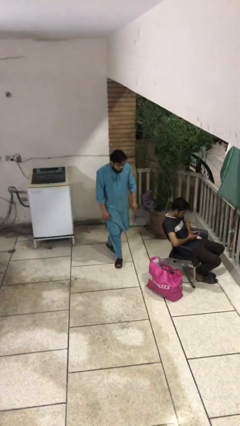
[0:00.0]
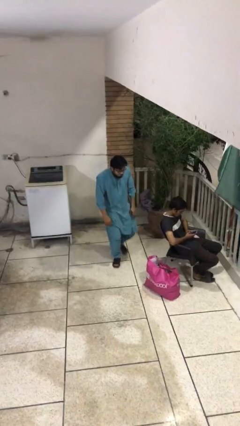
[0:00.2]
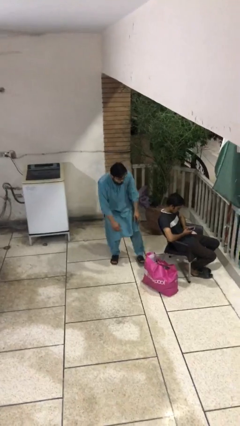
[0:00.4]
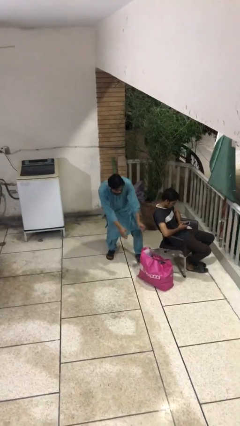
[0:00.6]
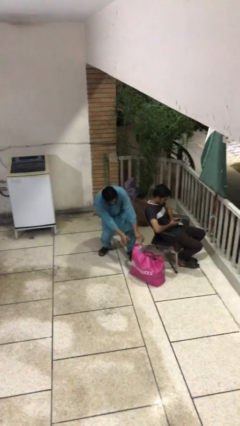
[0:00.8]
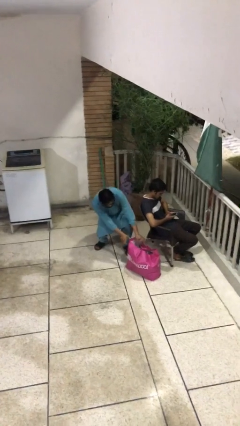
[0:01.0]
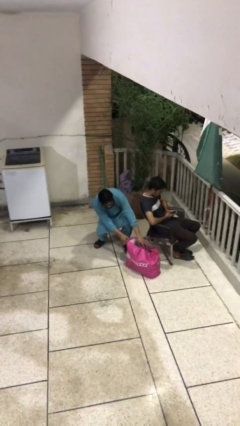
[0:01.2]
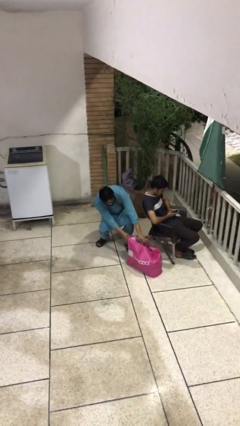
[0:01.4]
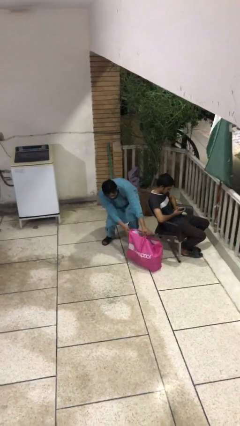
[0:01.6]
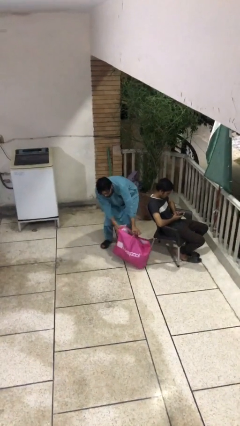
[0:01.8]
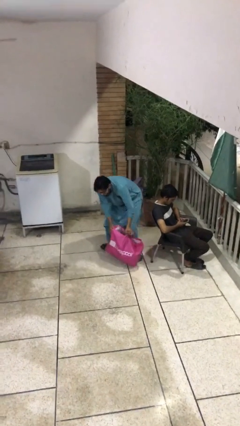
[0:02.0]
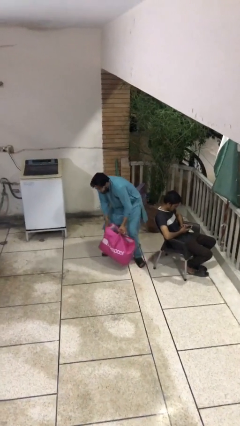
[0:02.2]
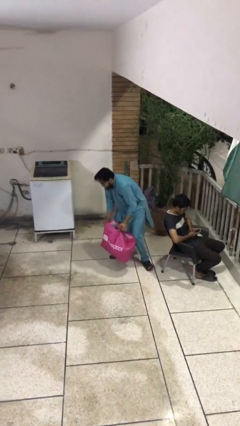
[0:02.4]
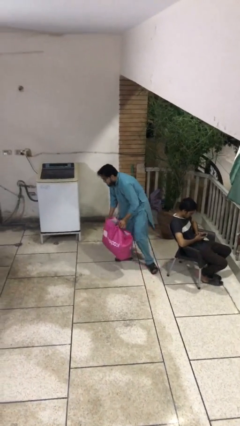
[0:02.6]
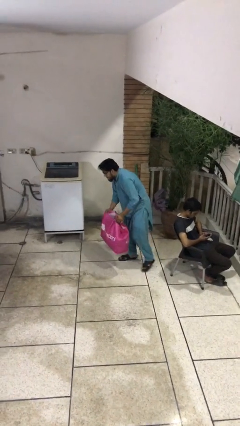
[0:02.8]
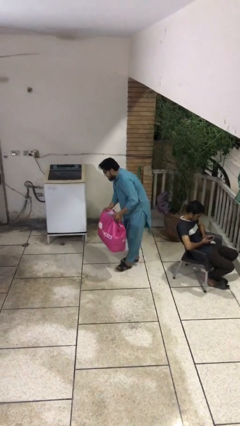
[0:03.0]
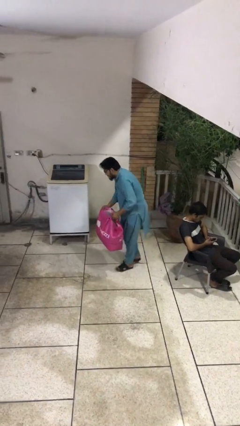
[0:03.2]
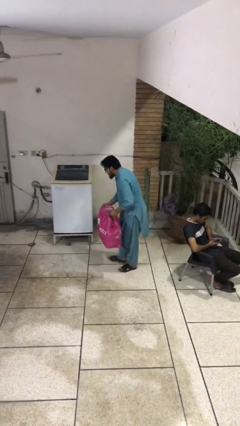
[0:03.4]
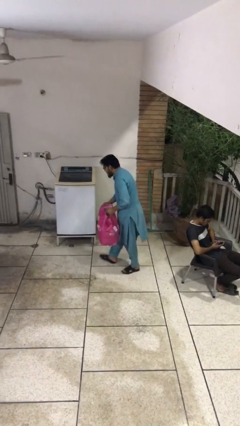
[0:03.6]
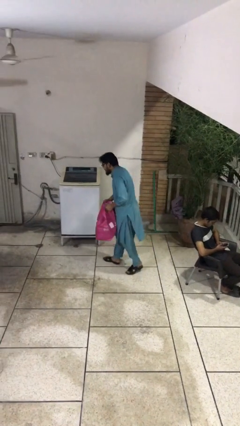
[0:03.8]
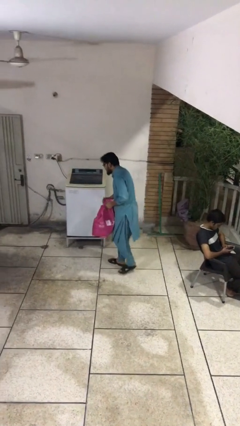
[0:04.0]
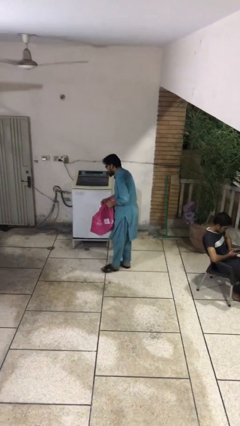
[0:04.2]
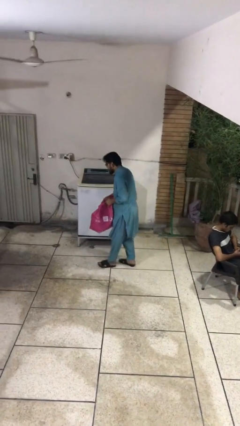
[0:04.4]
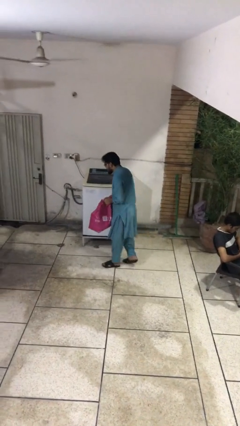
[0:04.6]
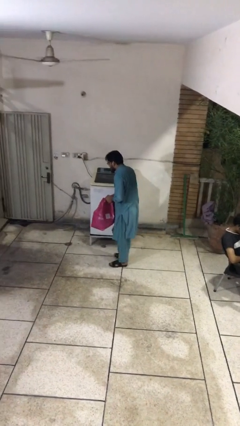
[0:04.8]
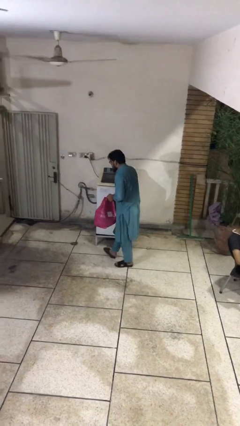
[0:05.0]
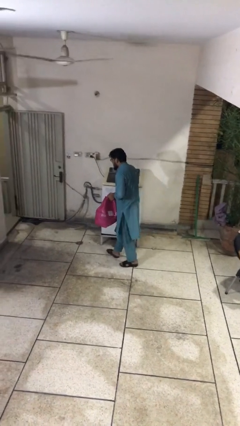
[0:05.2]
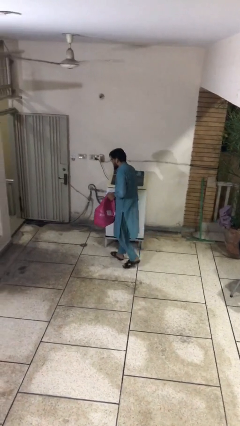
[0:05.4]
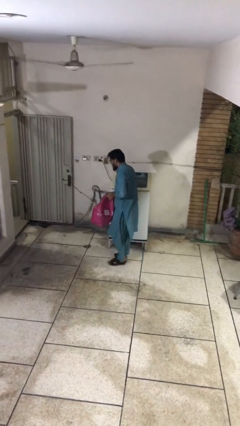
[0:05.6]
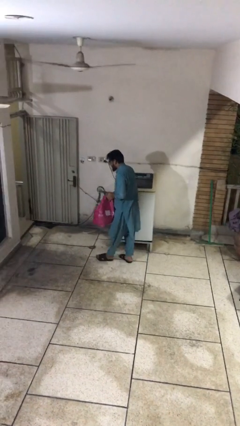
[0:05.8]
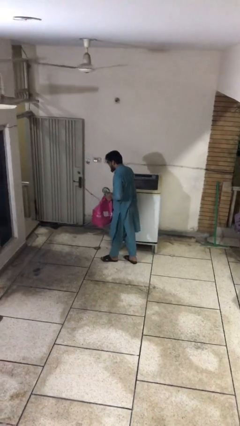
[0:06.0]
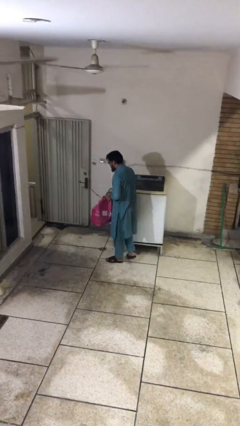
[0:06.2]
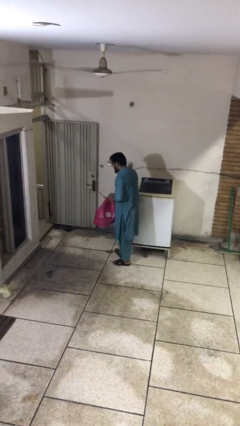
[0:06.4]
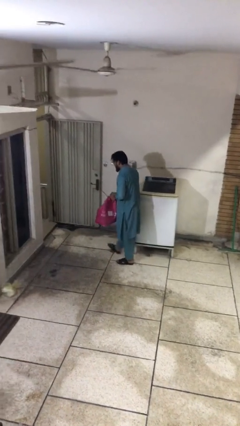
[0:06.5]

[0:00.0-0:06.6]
person steals object from person

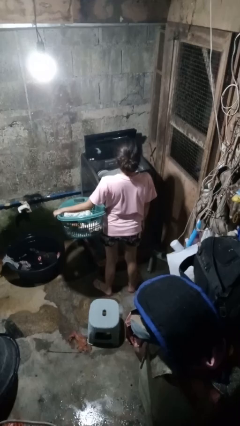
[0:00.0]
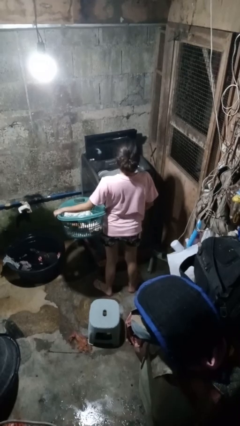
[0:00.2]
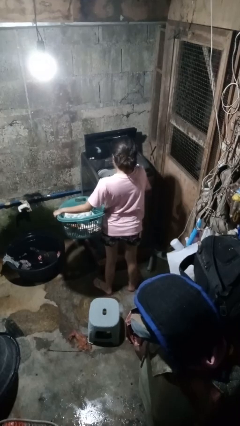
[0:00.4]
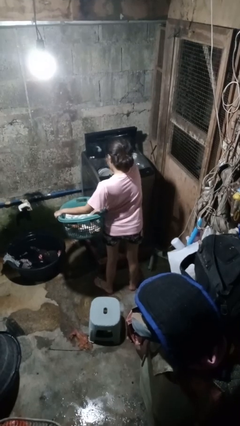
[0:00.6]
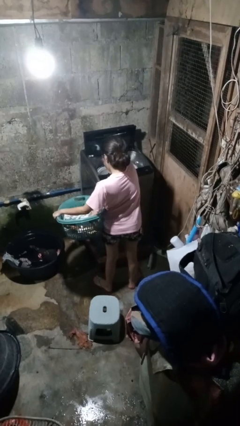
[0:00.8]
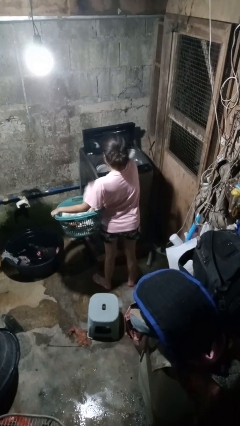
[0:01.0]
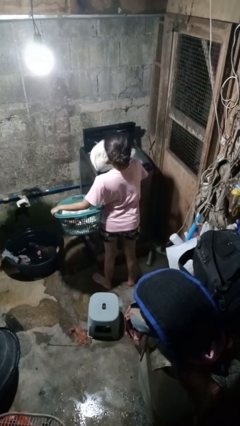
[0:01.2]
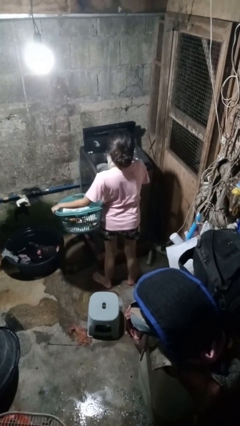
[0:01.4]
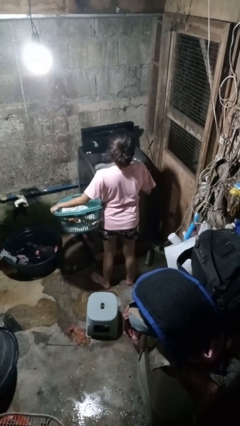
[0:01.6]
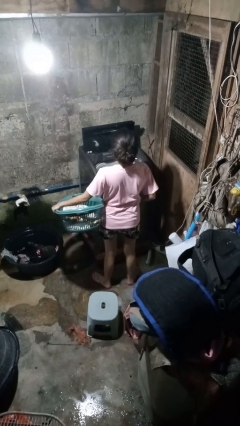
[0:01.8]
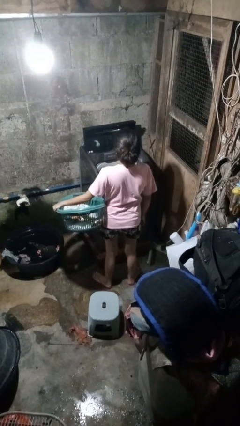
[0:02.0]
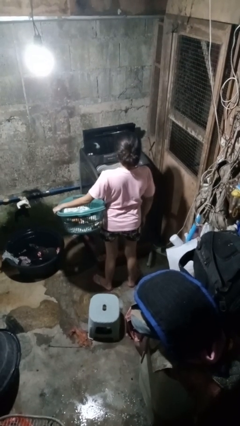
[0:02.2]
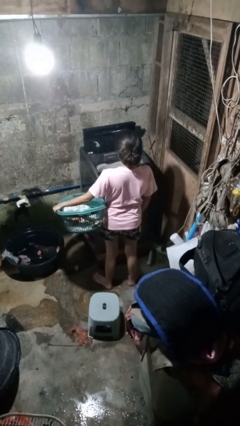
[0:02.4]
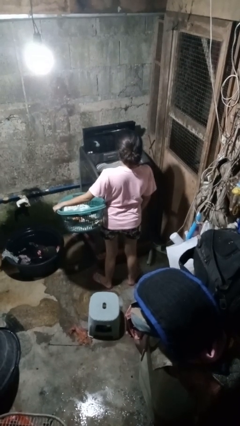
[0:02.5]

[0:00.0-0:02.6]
person loads dryer

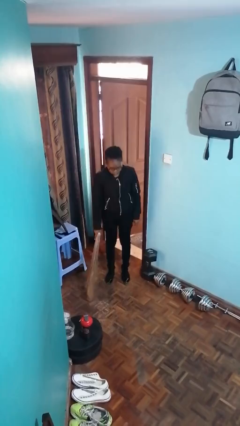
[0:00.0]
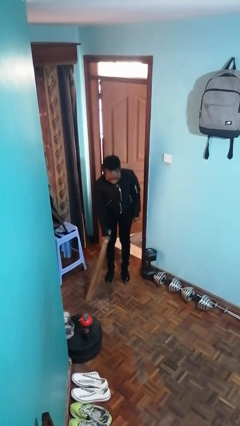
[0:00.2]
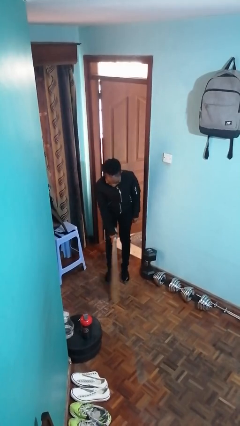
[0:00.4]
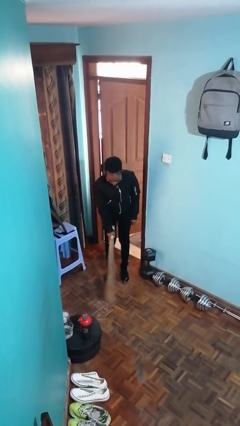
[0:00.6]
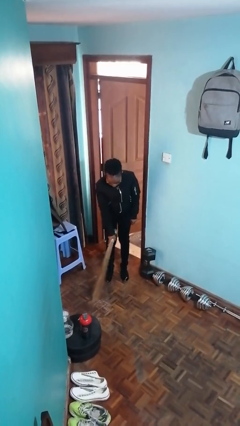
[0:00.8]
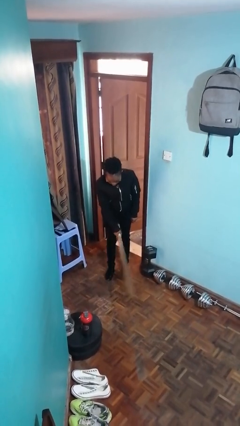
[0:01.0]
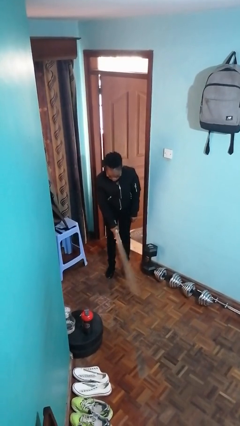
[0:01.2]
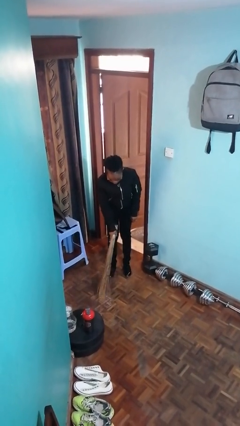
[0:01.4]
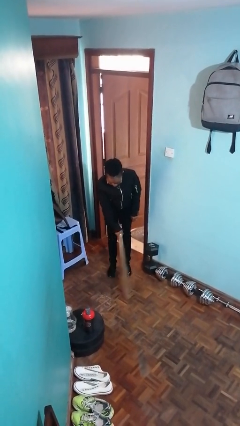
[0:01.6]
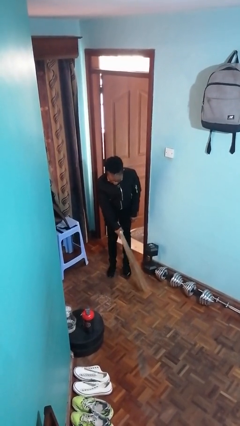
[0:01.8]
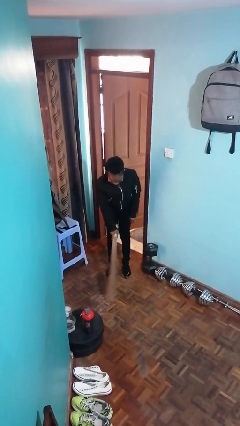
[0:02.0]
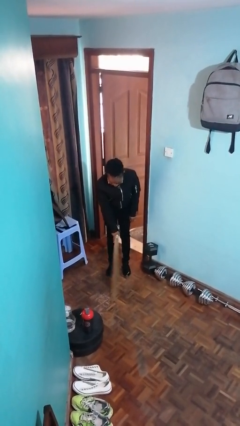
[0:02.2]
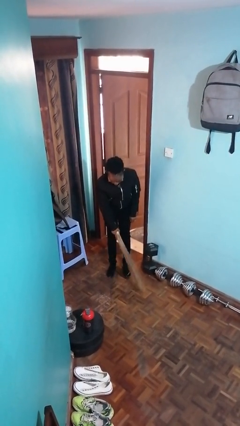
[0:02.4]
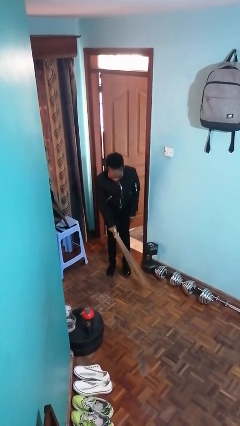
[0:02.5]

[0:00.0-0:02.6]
person sweeps floor

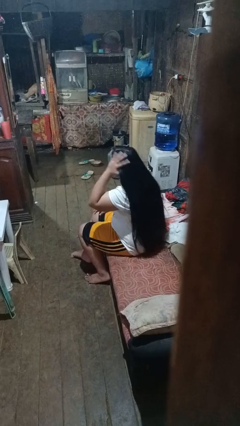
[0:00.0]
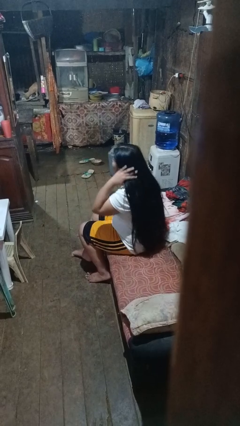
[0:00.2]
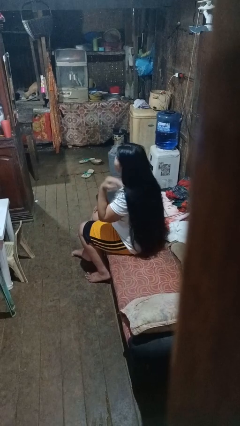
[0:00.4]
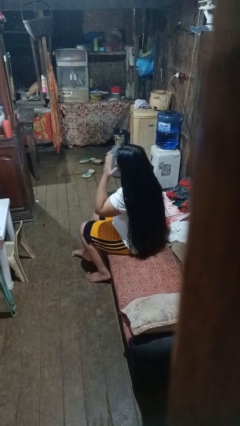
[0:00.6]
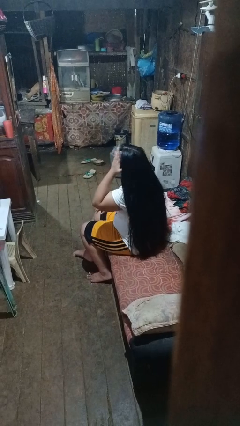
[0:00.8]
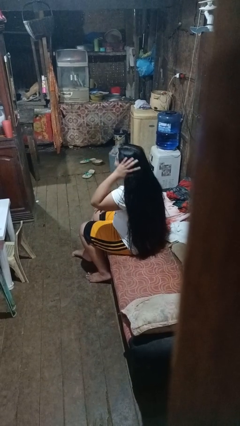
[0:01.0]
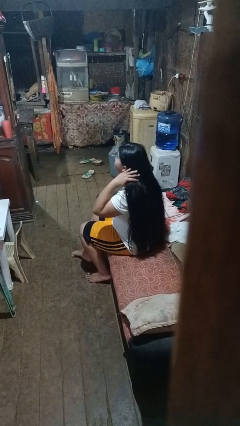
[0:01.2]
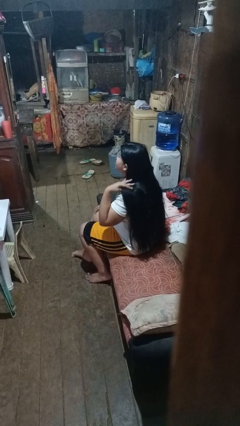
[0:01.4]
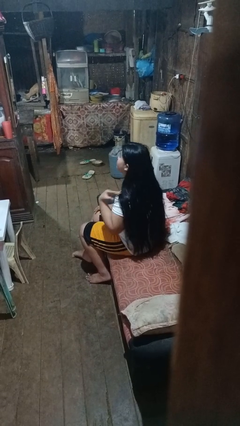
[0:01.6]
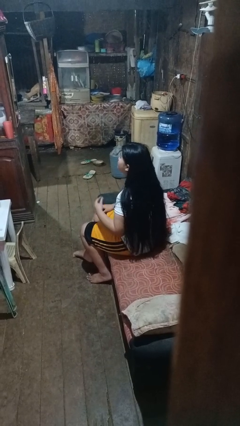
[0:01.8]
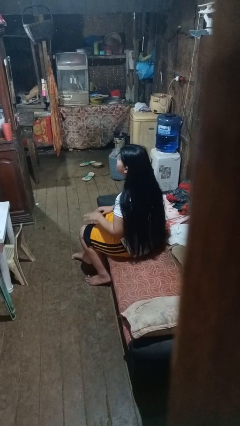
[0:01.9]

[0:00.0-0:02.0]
person strokes hair

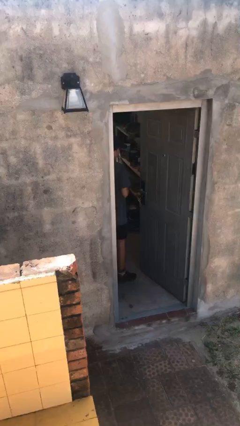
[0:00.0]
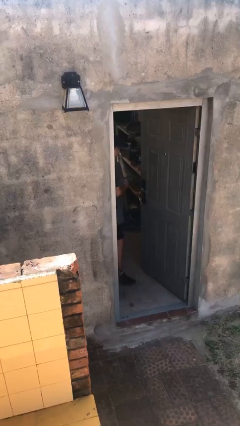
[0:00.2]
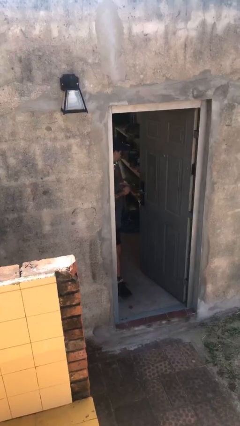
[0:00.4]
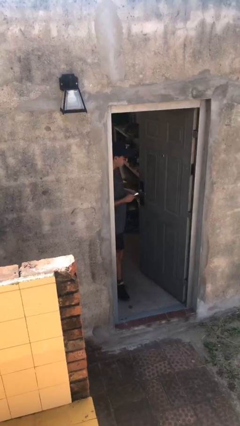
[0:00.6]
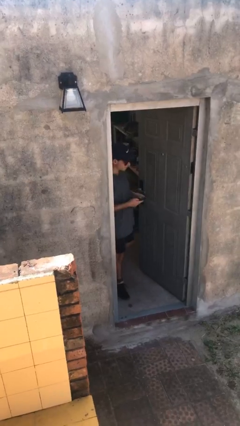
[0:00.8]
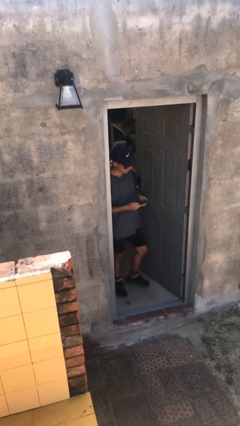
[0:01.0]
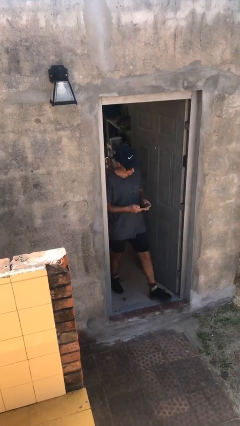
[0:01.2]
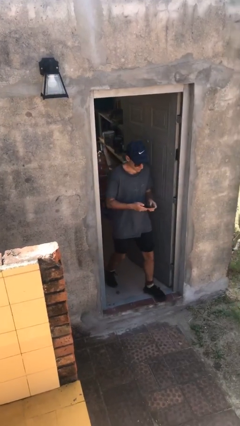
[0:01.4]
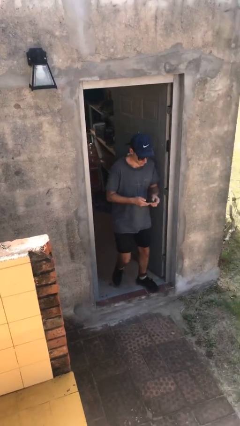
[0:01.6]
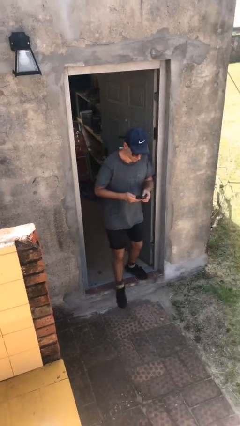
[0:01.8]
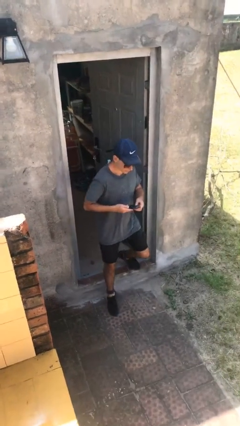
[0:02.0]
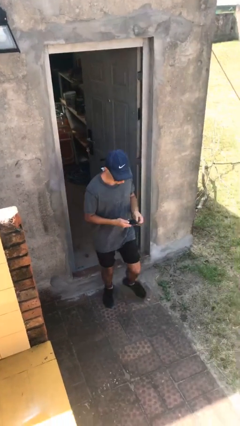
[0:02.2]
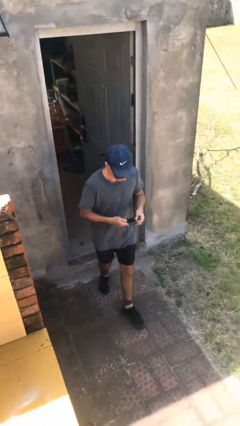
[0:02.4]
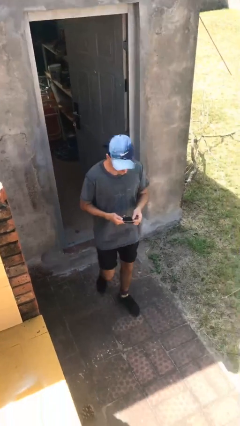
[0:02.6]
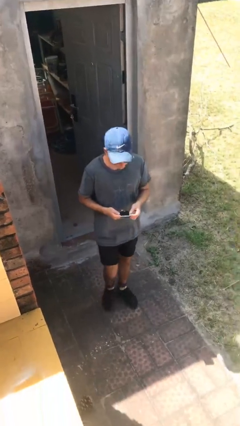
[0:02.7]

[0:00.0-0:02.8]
person enters scene through structure

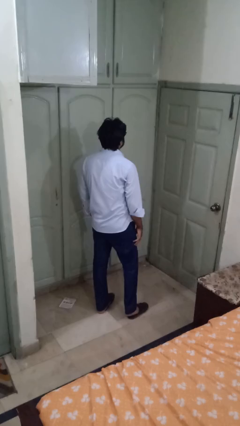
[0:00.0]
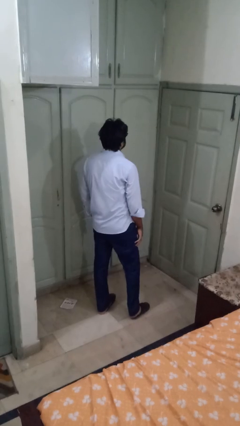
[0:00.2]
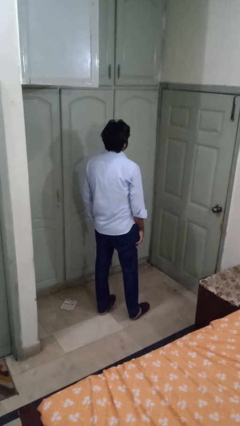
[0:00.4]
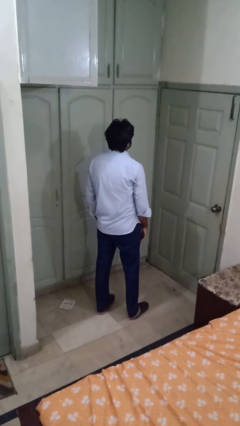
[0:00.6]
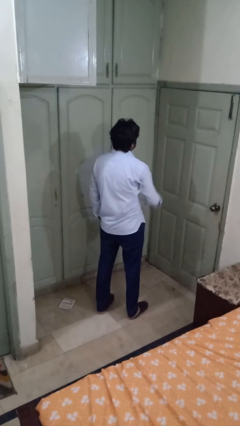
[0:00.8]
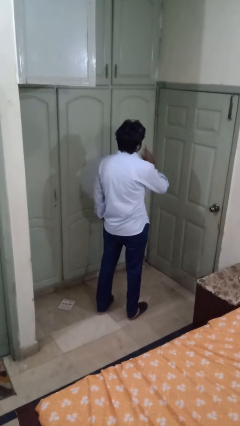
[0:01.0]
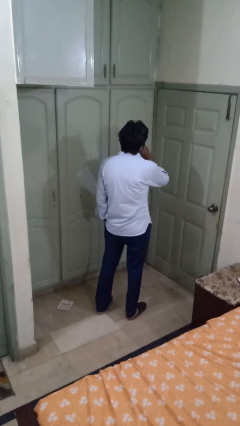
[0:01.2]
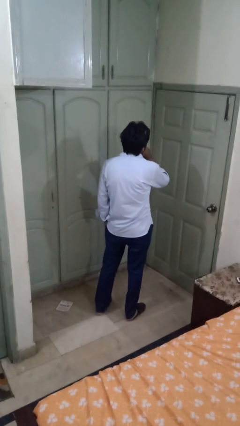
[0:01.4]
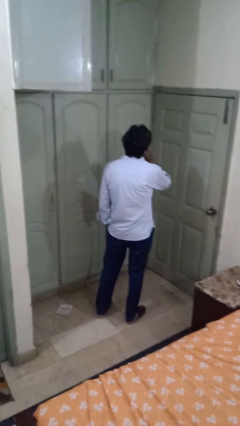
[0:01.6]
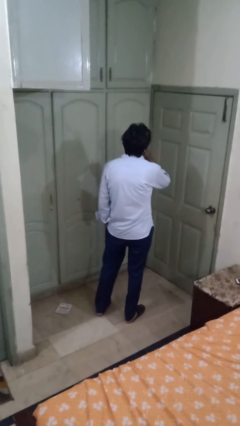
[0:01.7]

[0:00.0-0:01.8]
person gestures be quiet
